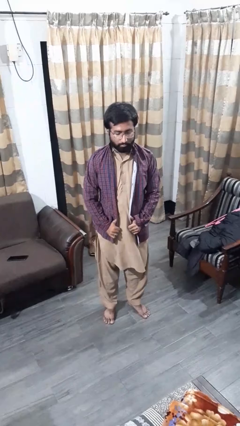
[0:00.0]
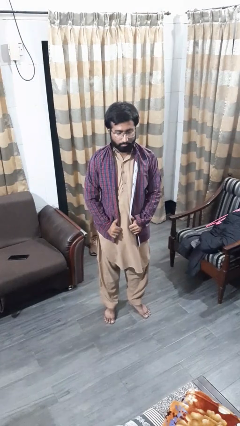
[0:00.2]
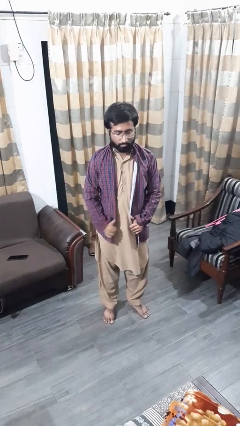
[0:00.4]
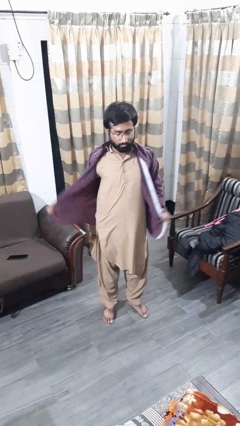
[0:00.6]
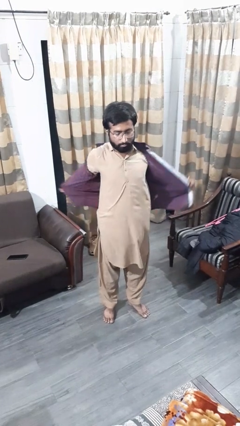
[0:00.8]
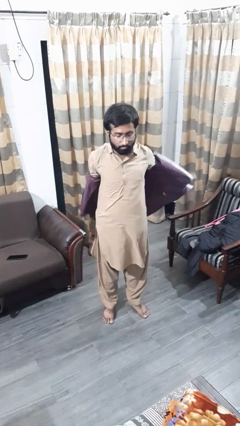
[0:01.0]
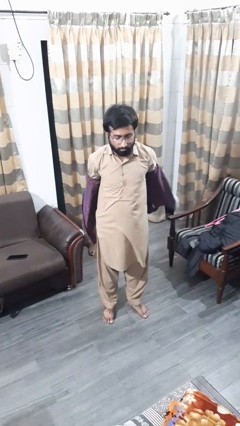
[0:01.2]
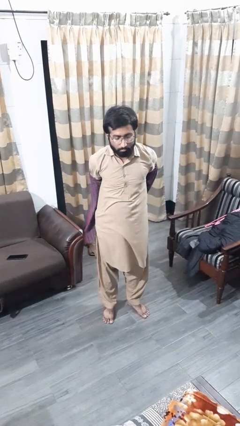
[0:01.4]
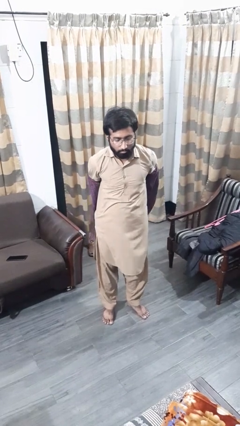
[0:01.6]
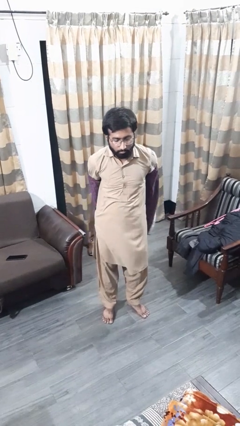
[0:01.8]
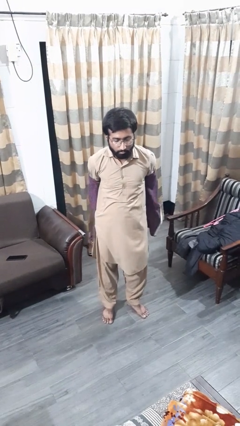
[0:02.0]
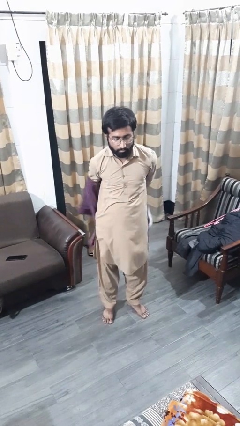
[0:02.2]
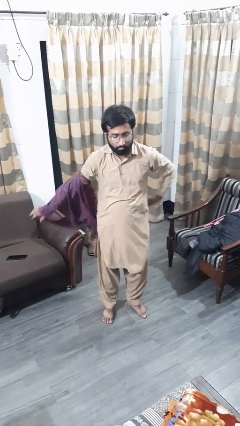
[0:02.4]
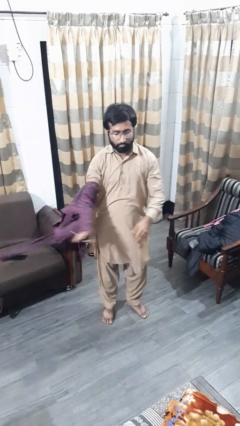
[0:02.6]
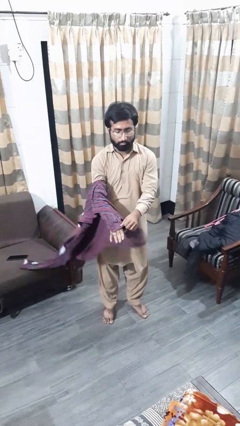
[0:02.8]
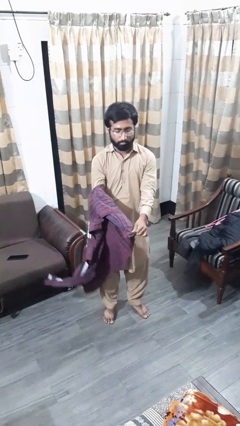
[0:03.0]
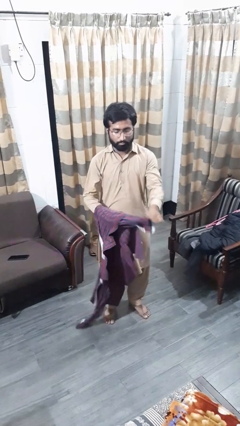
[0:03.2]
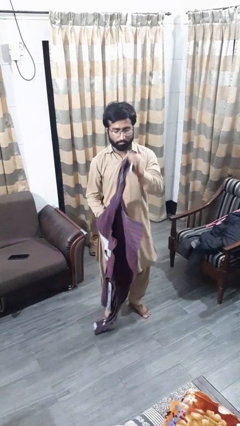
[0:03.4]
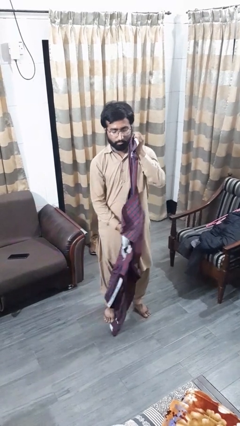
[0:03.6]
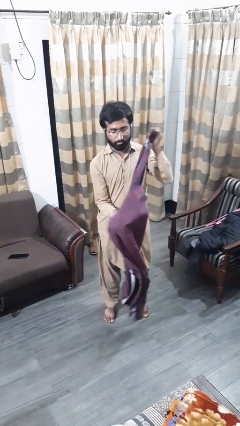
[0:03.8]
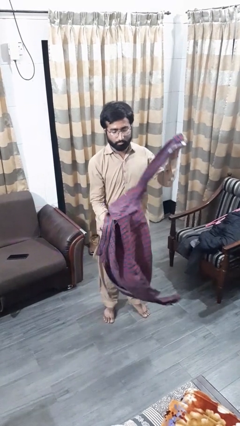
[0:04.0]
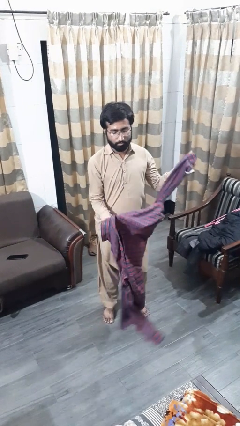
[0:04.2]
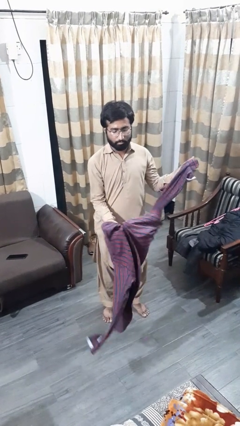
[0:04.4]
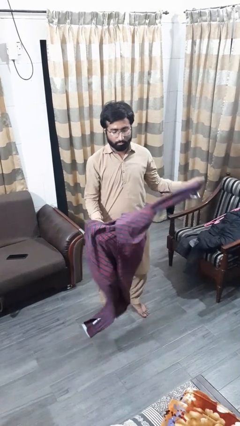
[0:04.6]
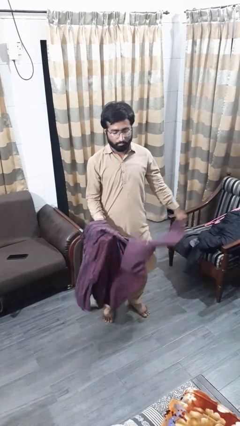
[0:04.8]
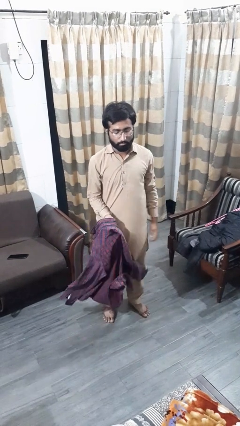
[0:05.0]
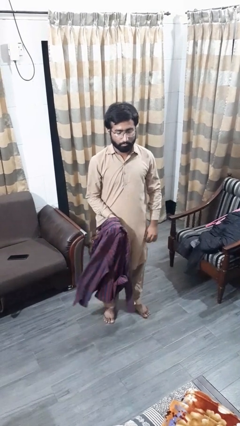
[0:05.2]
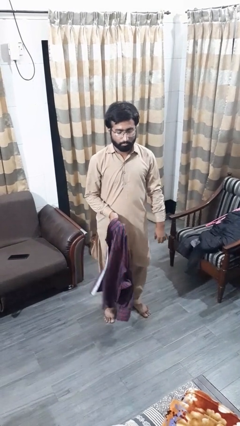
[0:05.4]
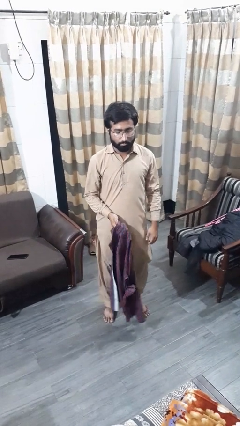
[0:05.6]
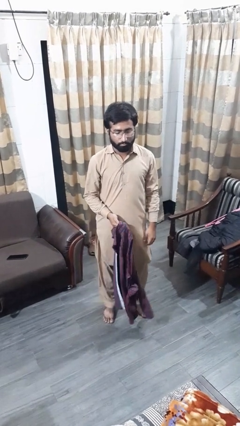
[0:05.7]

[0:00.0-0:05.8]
person takes off shirt

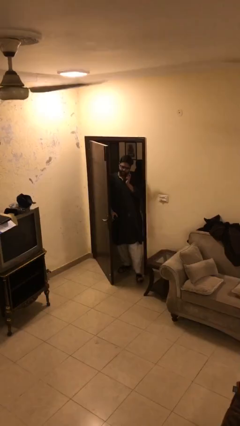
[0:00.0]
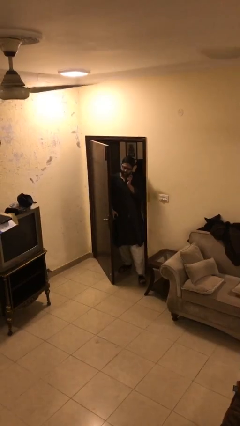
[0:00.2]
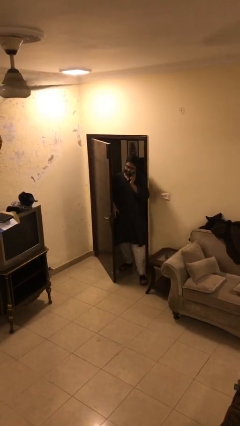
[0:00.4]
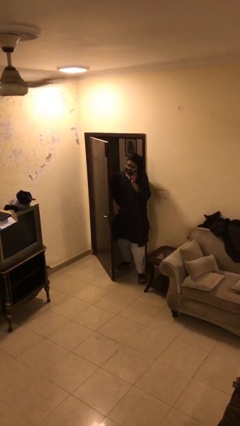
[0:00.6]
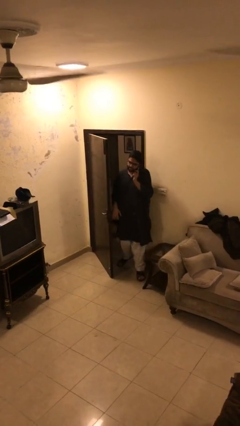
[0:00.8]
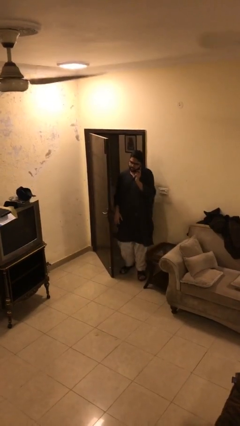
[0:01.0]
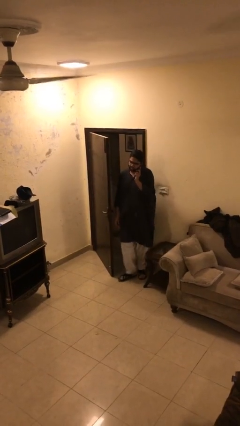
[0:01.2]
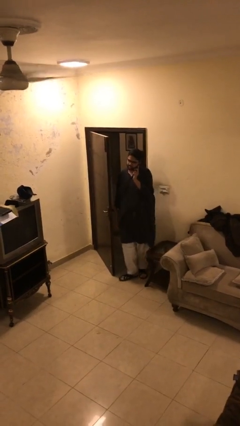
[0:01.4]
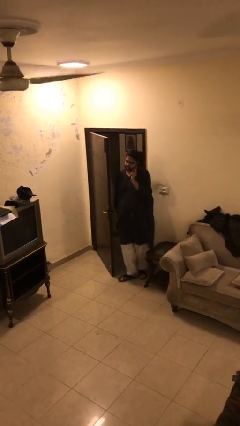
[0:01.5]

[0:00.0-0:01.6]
person enters scene through structure

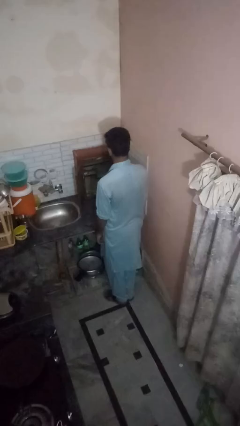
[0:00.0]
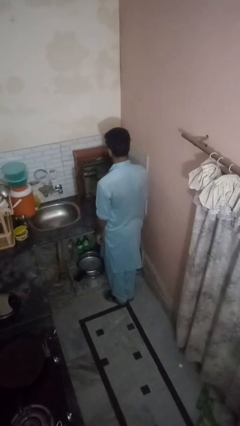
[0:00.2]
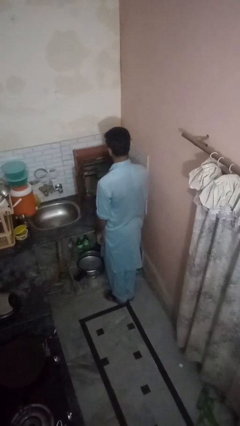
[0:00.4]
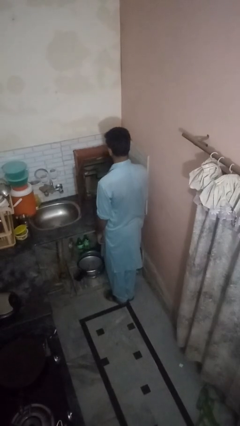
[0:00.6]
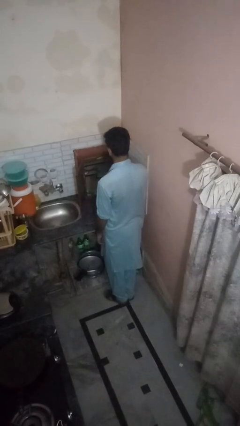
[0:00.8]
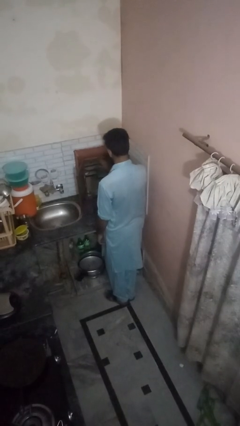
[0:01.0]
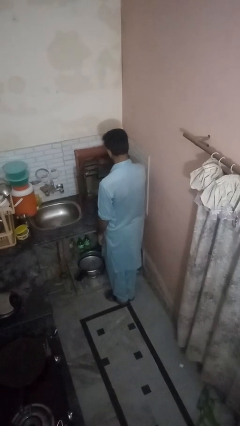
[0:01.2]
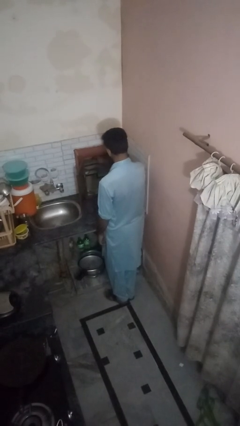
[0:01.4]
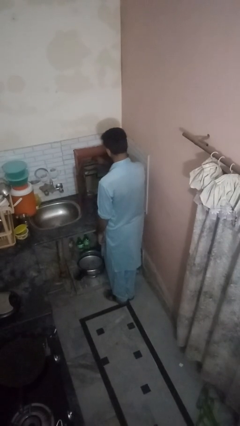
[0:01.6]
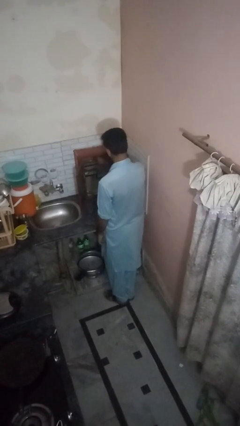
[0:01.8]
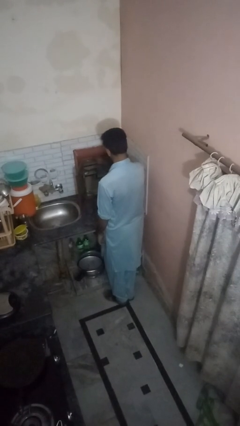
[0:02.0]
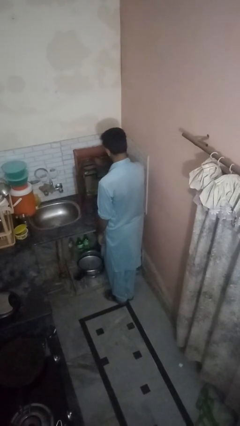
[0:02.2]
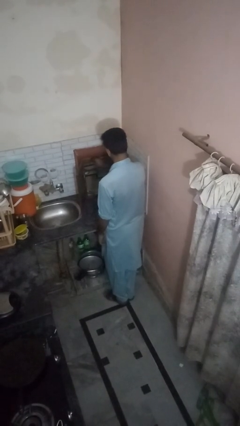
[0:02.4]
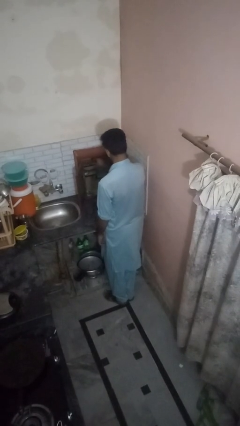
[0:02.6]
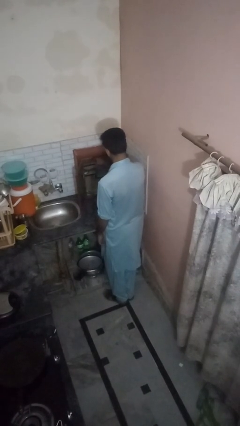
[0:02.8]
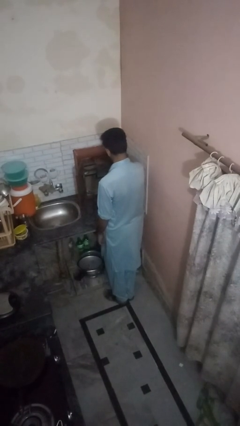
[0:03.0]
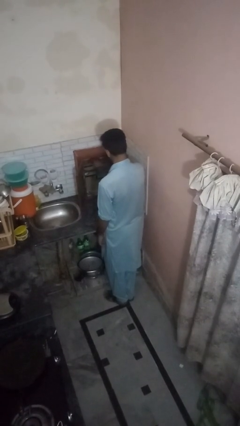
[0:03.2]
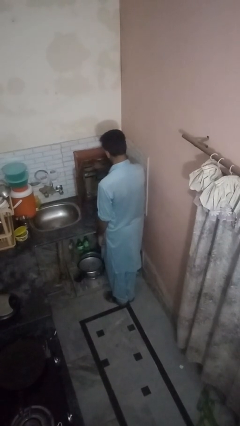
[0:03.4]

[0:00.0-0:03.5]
person searches in kitchen drawer

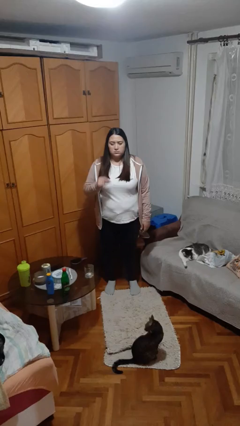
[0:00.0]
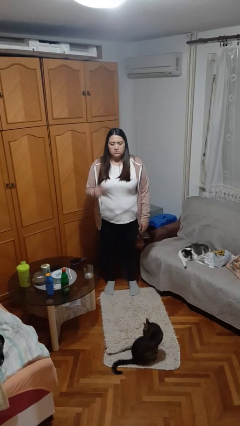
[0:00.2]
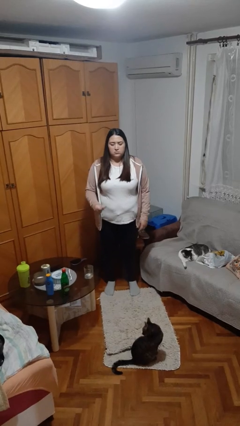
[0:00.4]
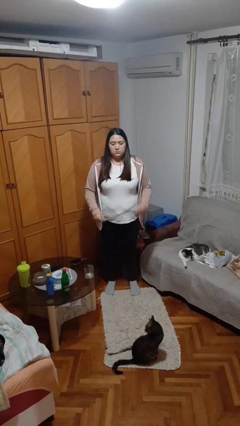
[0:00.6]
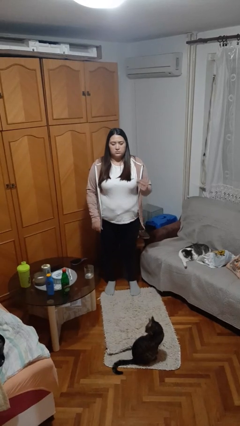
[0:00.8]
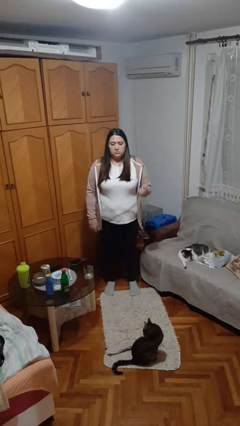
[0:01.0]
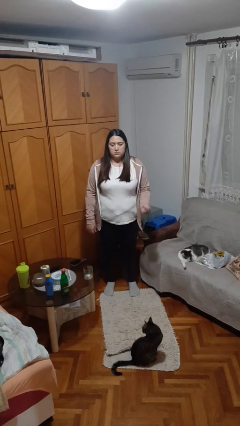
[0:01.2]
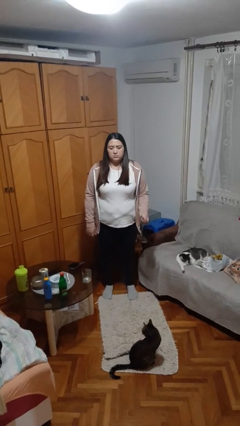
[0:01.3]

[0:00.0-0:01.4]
person snaps fingers

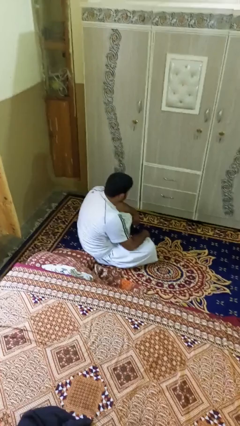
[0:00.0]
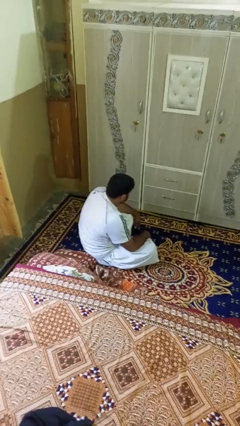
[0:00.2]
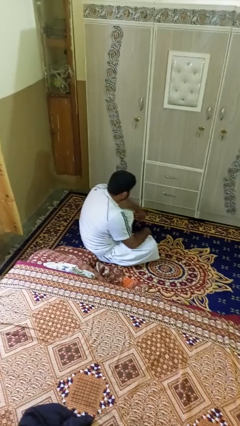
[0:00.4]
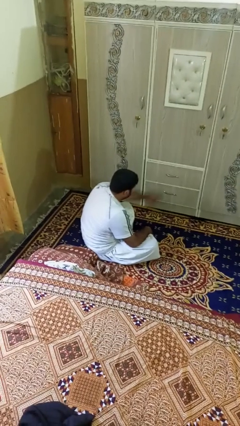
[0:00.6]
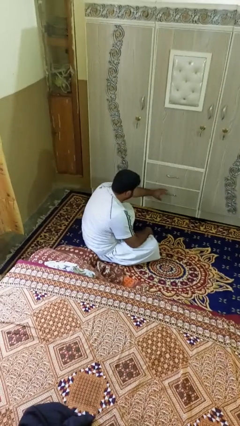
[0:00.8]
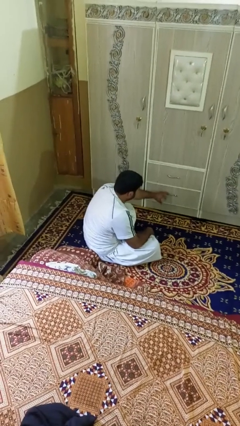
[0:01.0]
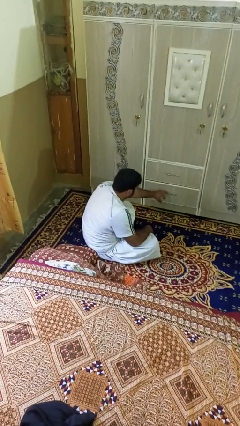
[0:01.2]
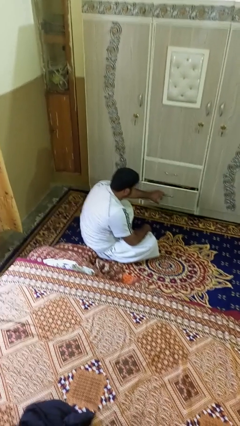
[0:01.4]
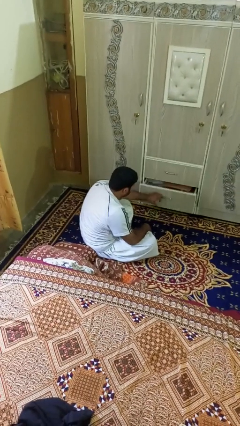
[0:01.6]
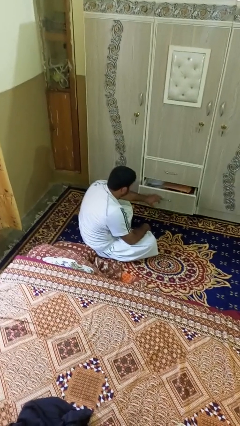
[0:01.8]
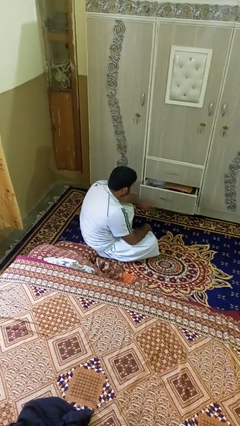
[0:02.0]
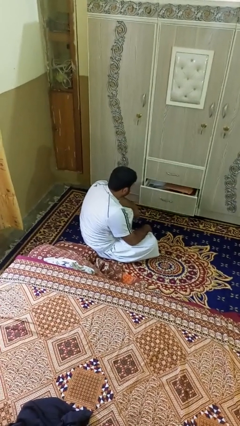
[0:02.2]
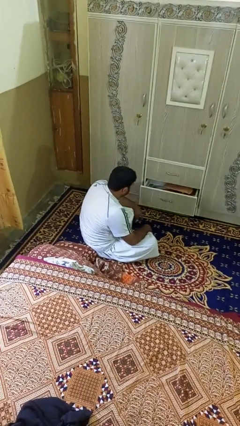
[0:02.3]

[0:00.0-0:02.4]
person opens dresser drawer

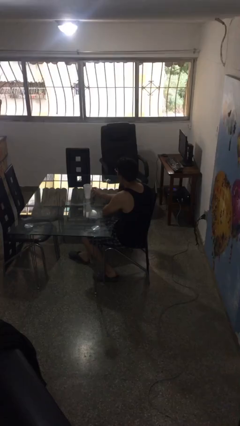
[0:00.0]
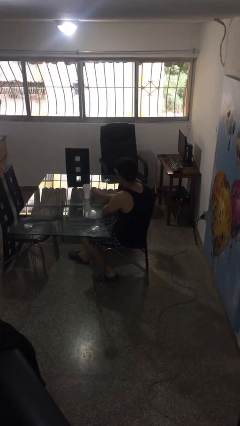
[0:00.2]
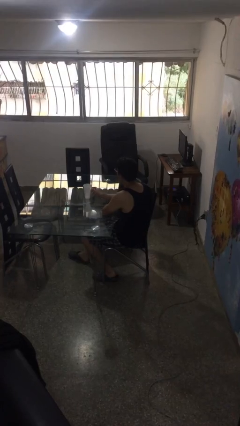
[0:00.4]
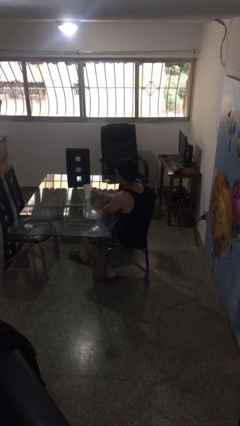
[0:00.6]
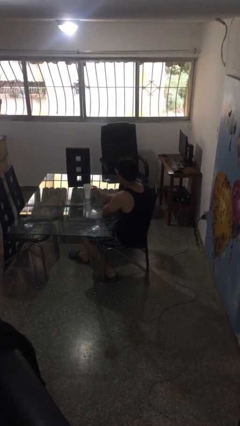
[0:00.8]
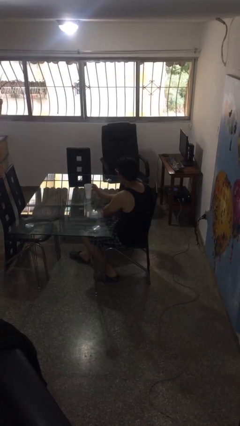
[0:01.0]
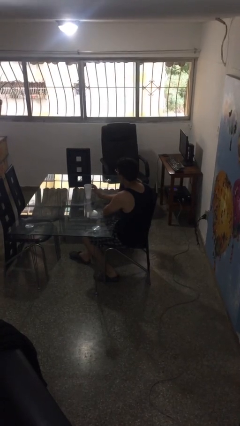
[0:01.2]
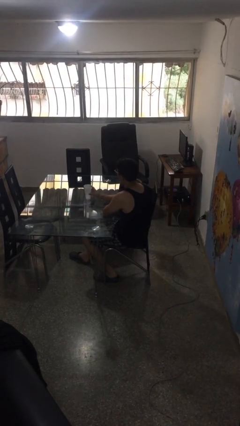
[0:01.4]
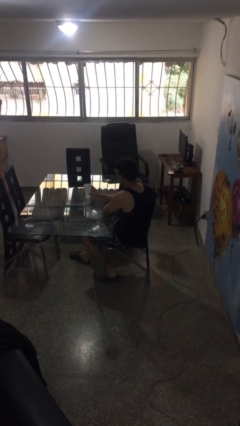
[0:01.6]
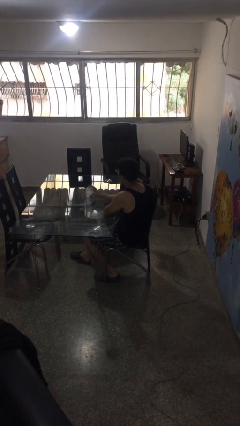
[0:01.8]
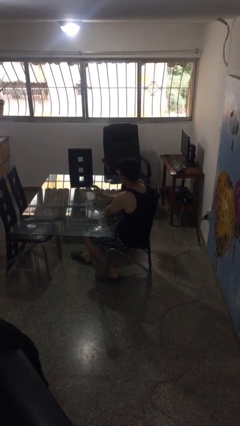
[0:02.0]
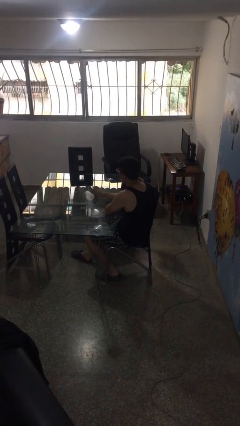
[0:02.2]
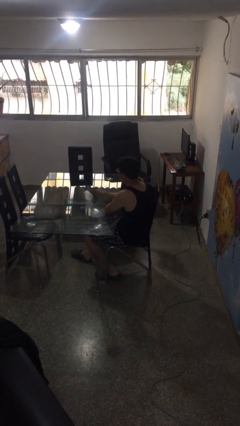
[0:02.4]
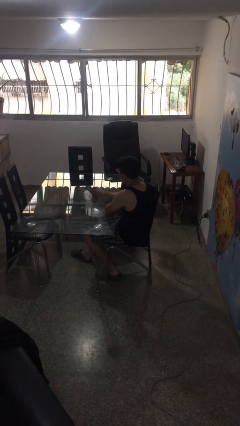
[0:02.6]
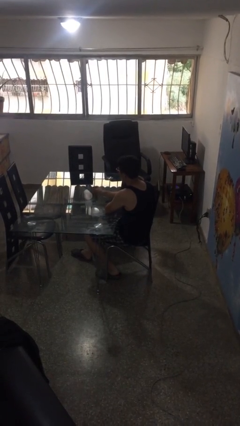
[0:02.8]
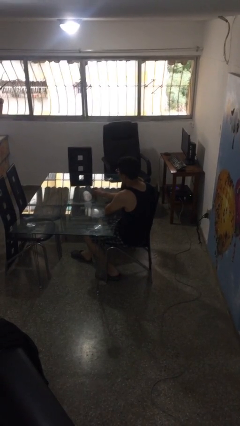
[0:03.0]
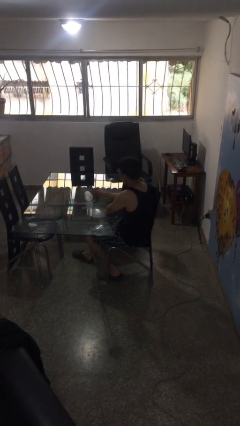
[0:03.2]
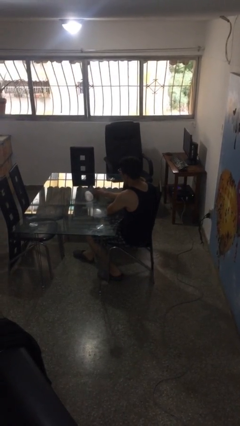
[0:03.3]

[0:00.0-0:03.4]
person knocks over glass
